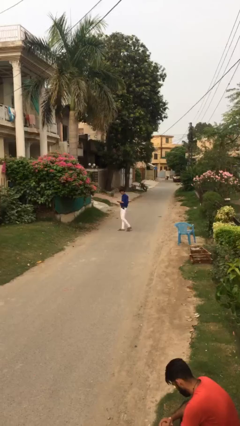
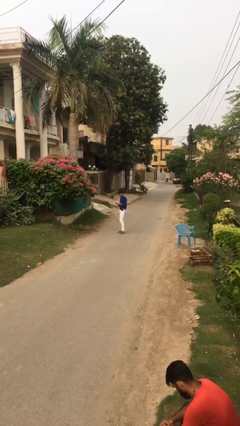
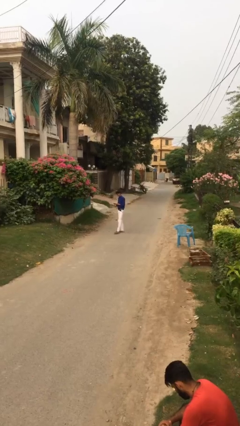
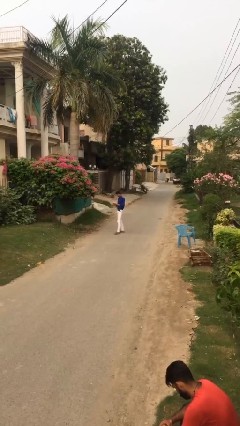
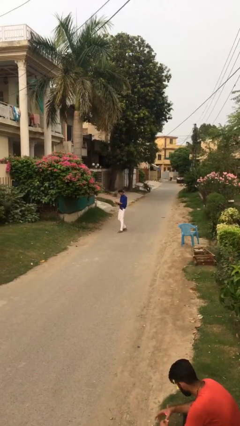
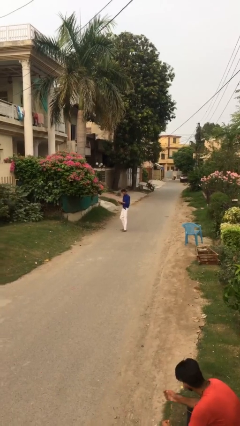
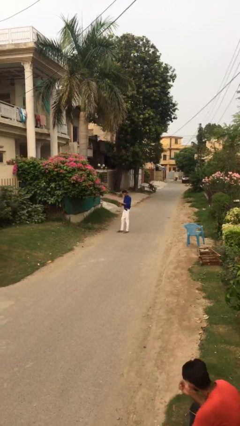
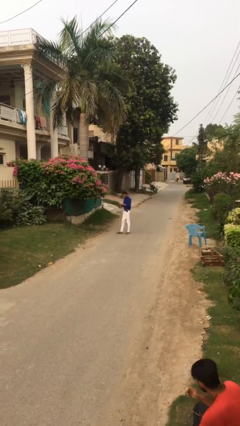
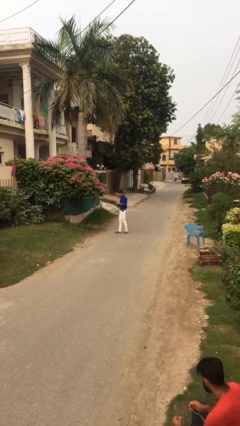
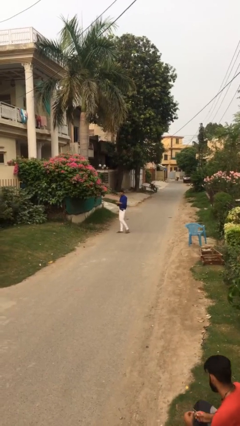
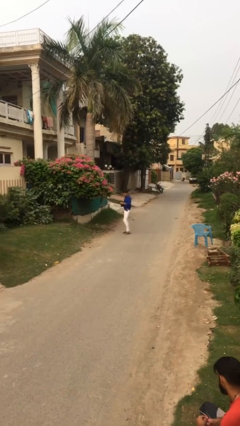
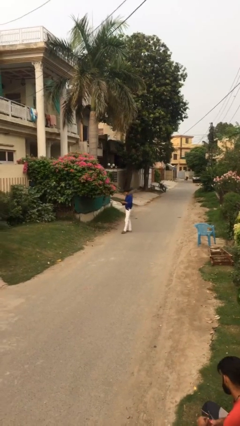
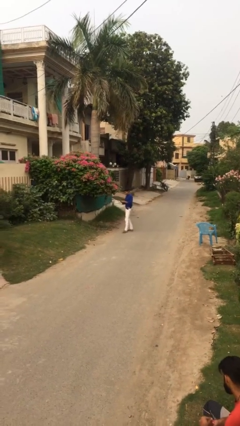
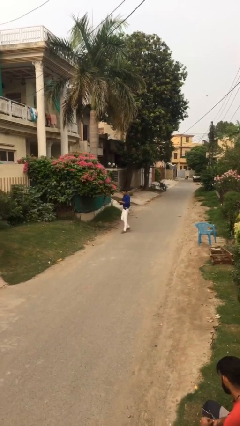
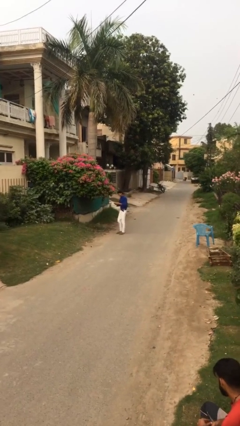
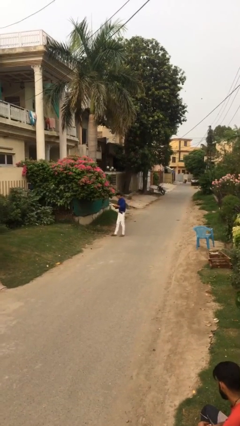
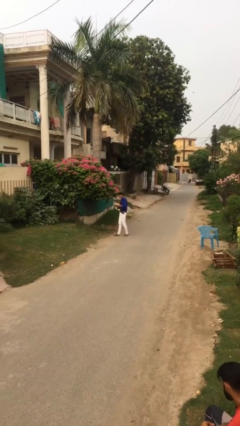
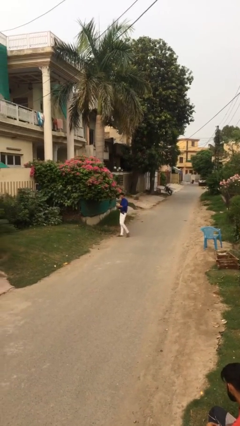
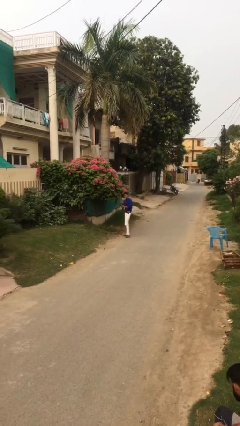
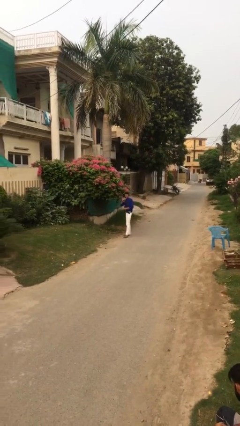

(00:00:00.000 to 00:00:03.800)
person texts on phone

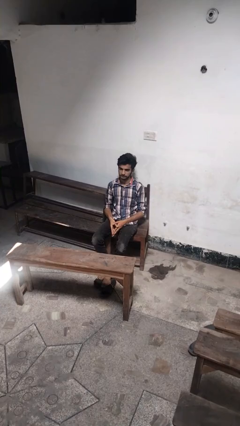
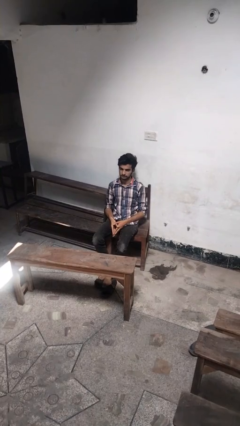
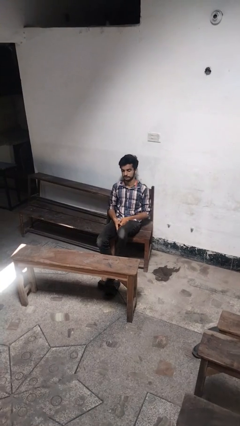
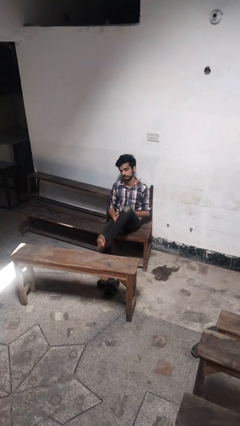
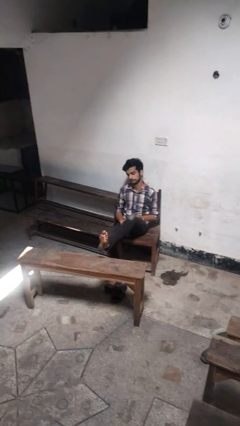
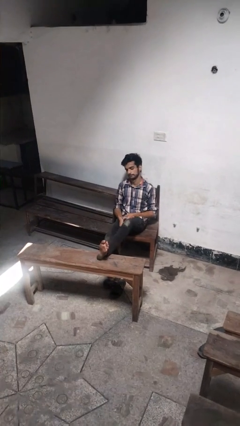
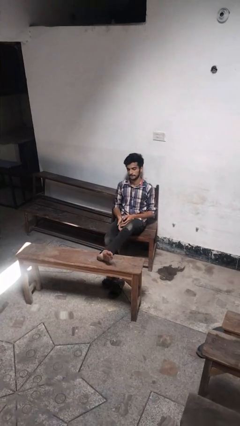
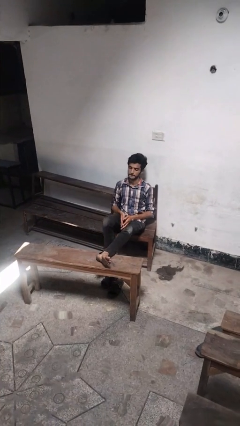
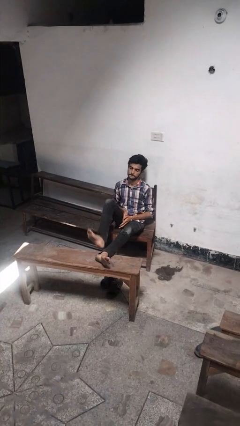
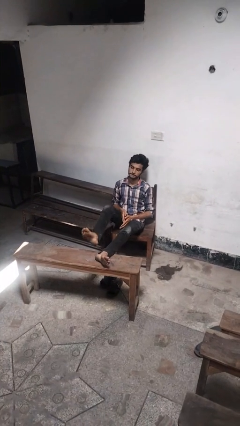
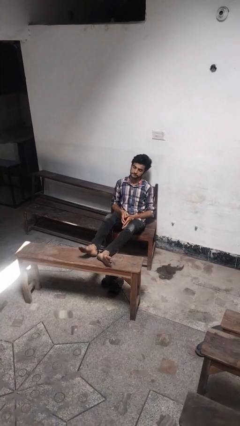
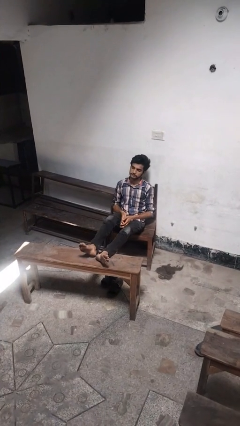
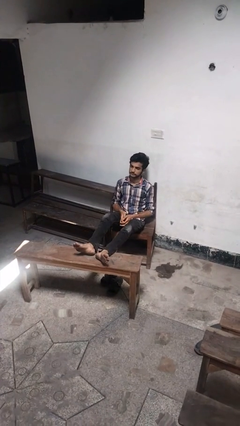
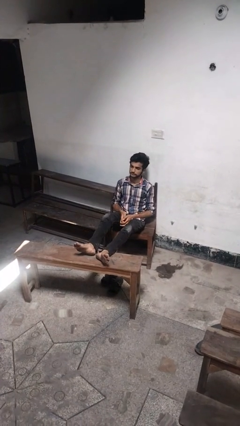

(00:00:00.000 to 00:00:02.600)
person puts feet up

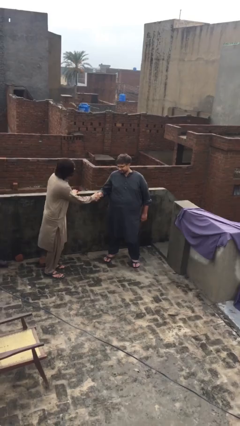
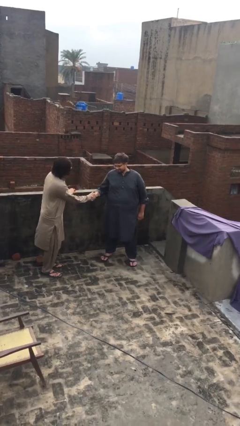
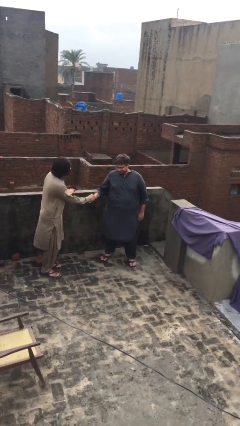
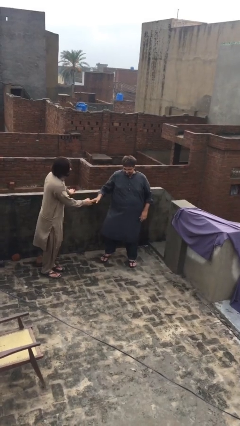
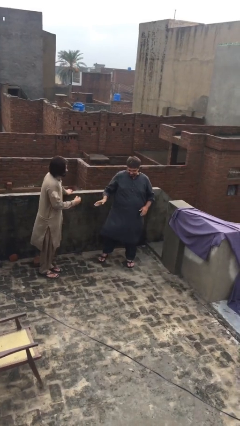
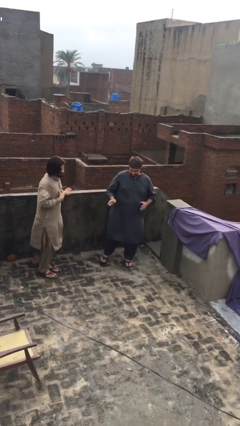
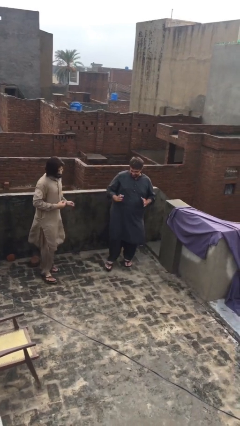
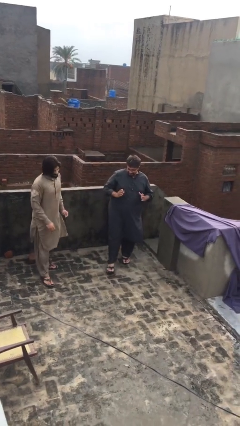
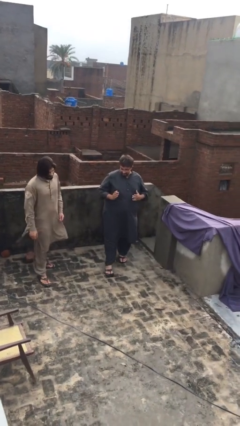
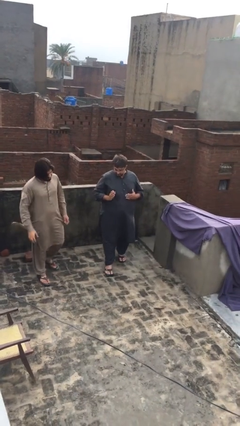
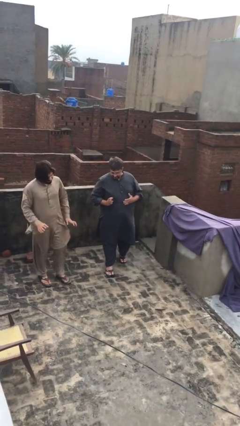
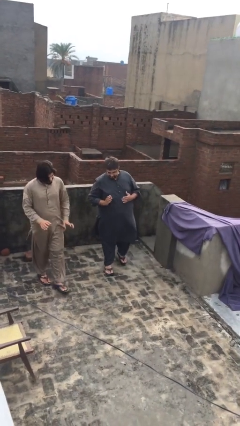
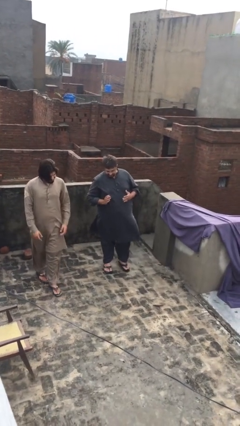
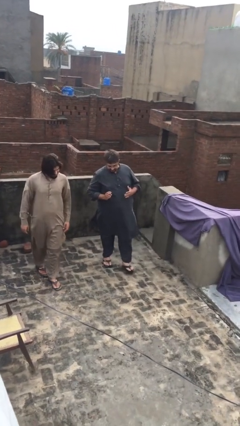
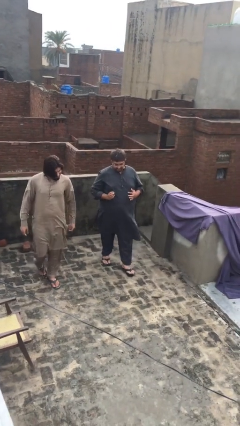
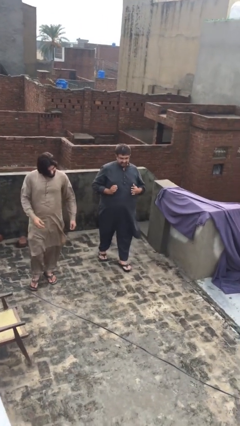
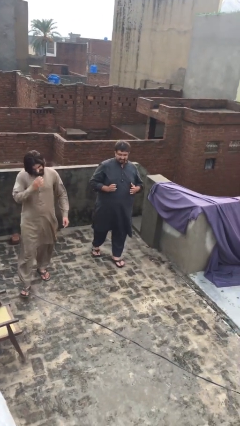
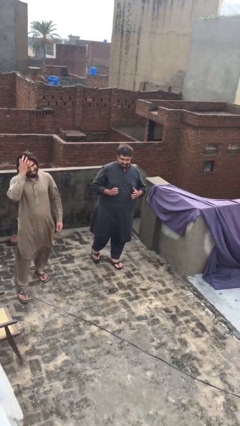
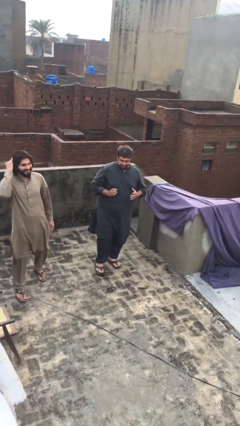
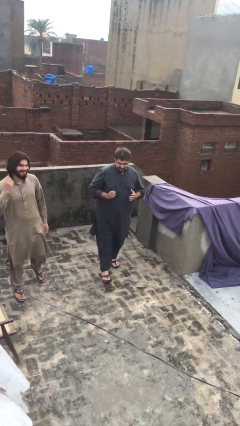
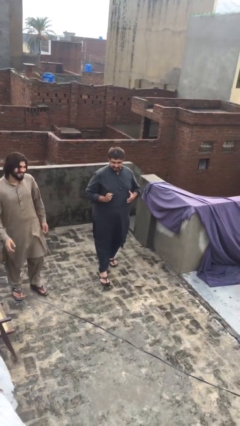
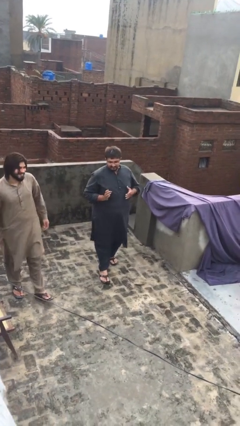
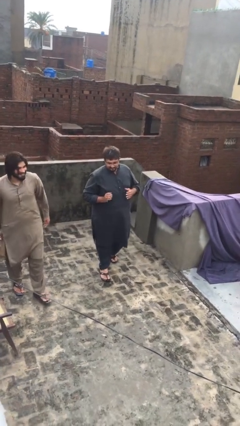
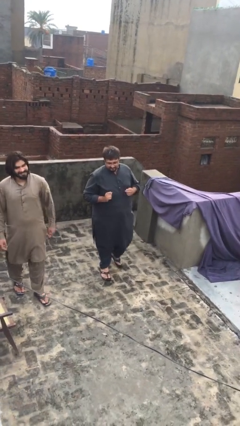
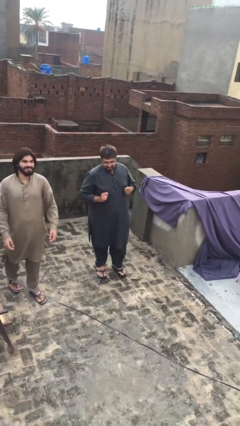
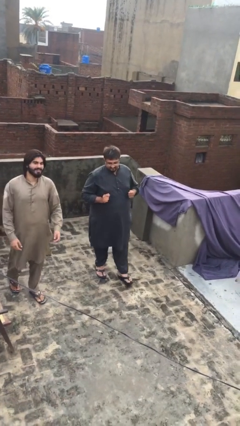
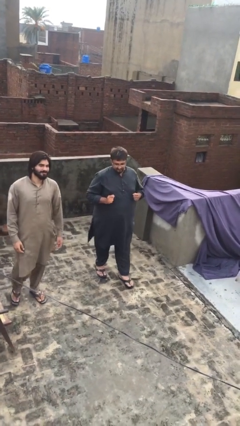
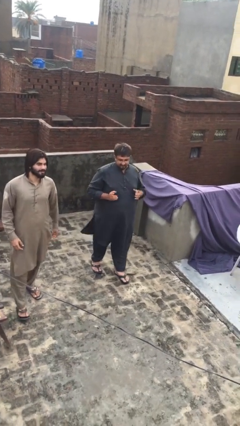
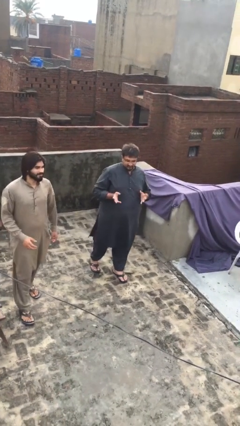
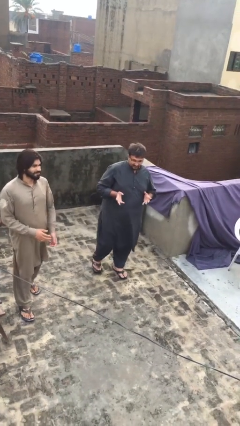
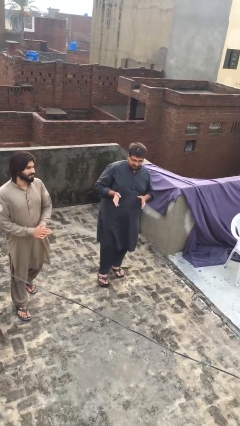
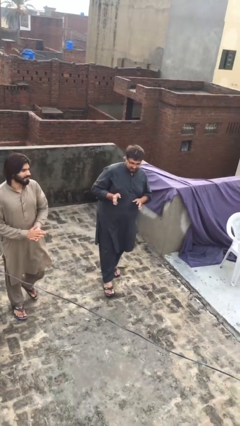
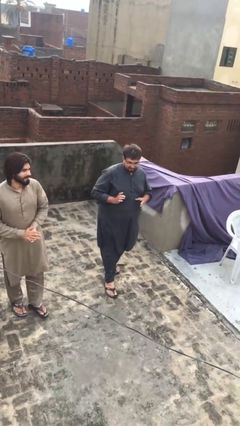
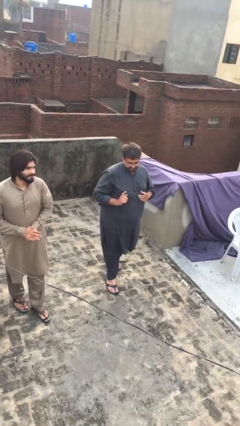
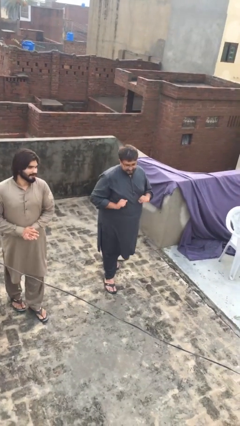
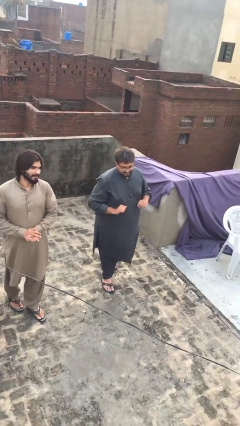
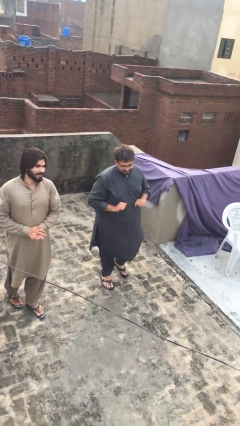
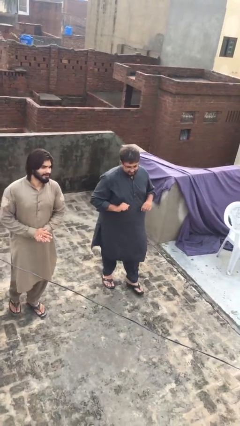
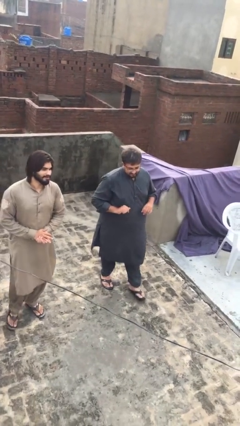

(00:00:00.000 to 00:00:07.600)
person talks to person

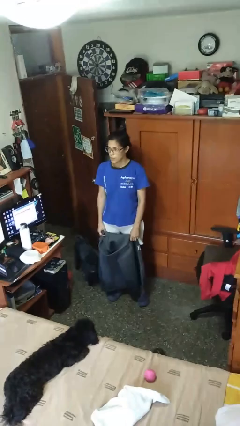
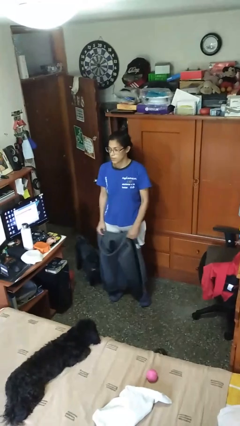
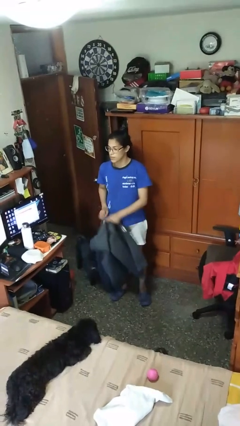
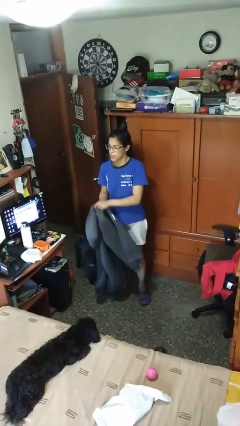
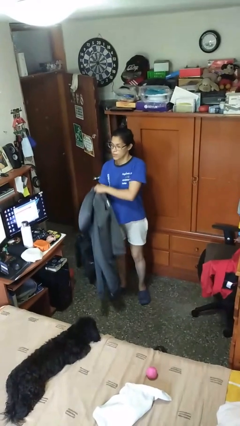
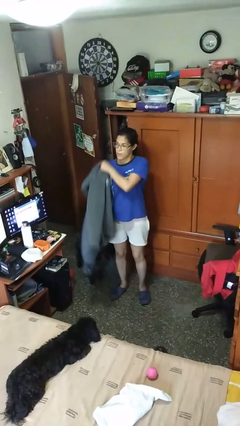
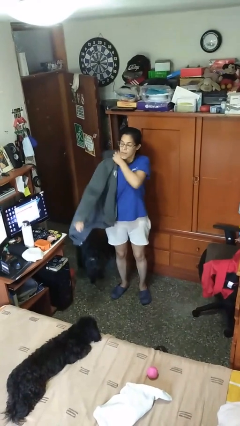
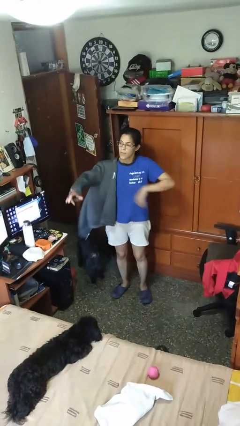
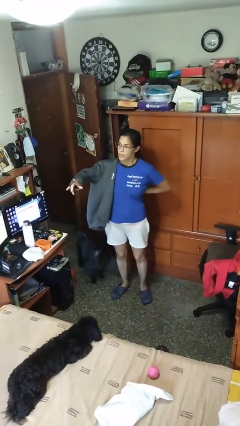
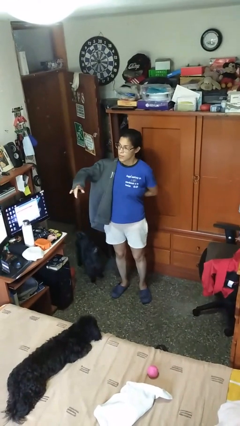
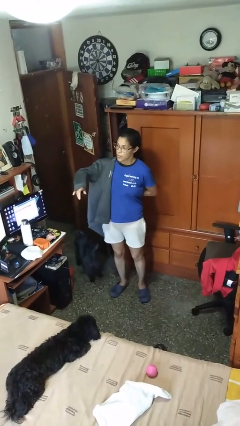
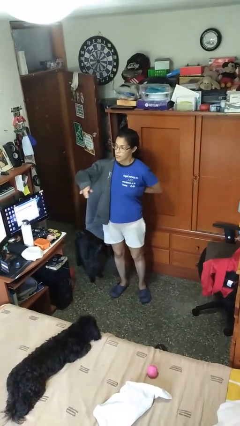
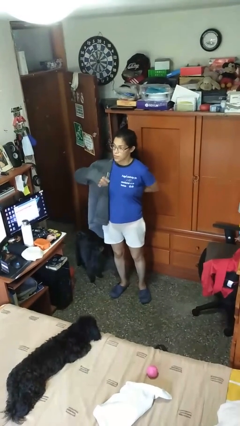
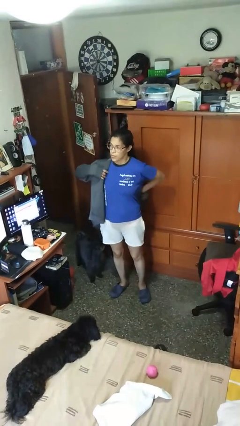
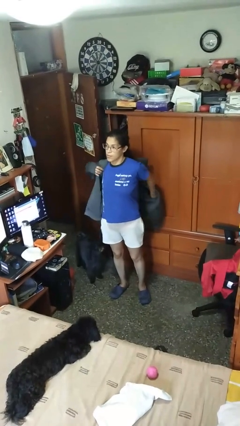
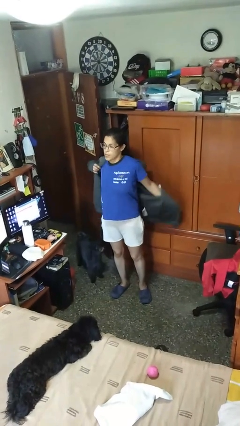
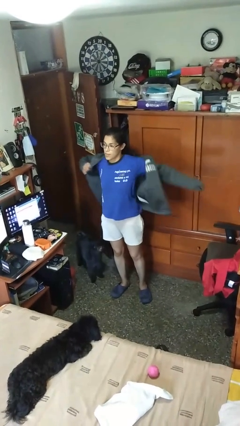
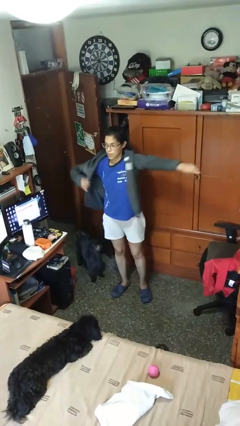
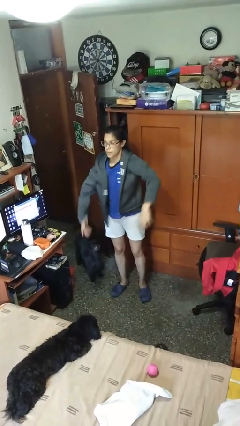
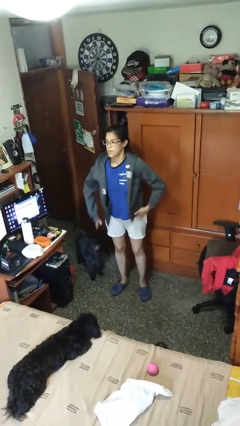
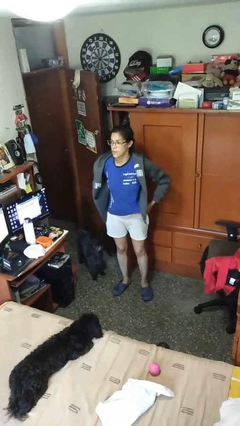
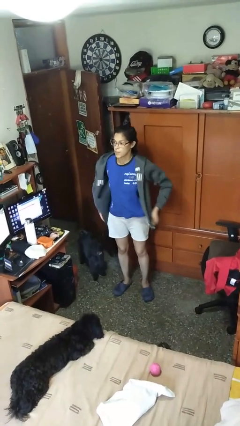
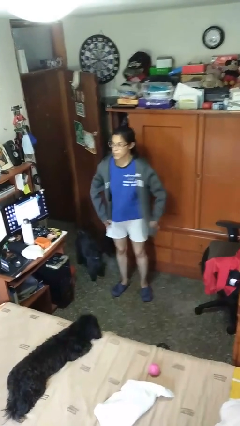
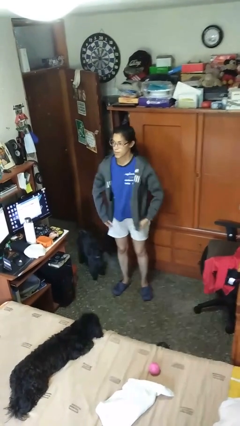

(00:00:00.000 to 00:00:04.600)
person puts on jacket
